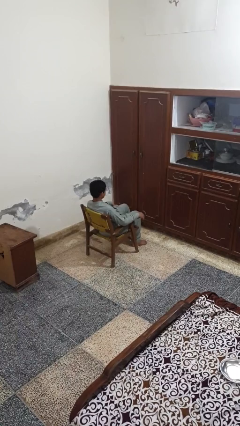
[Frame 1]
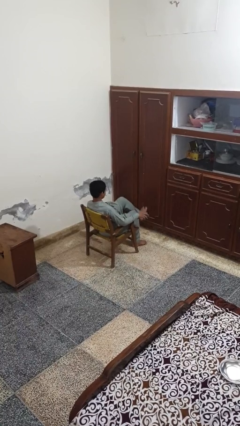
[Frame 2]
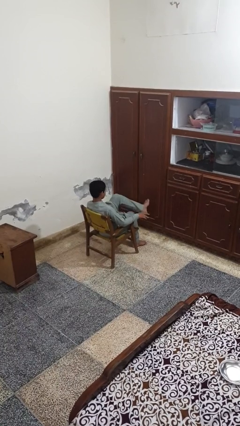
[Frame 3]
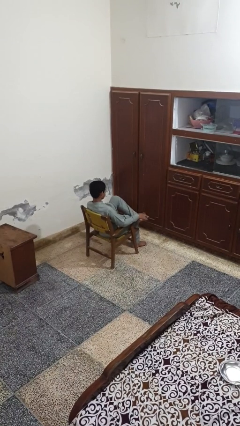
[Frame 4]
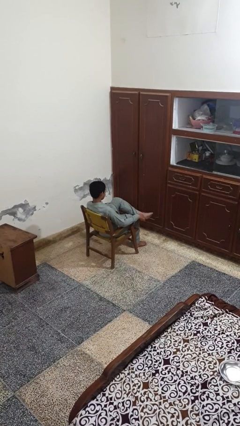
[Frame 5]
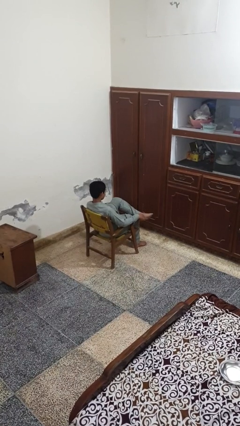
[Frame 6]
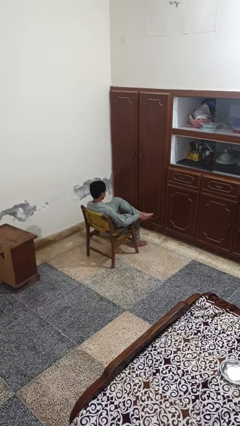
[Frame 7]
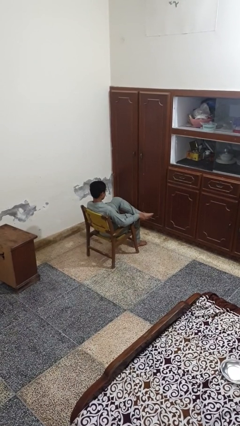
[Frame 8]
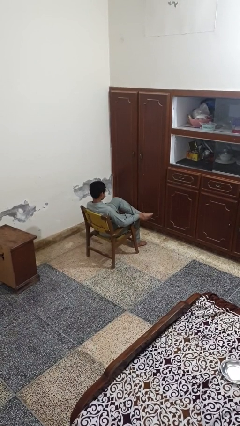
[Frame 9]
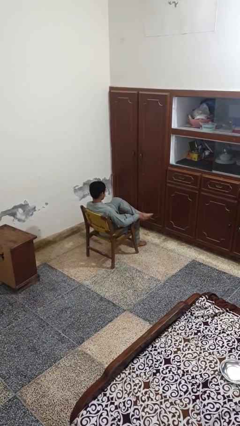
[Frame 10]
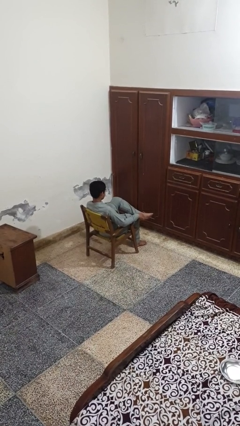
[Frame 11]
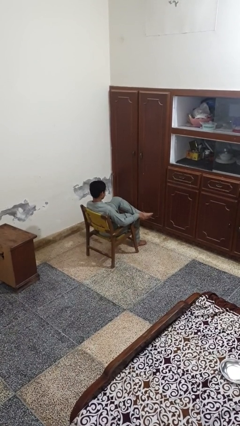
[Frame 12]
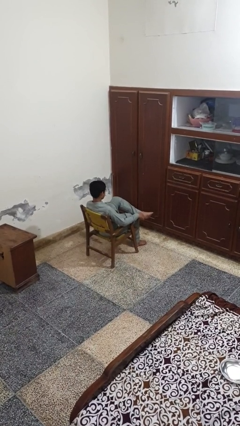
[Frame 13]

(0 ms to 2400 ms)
person crosses legs

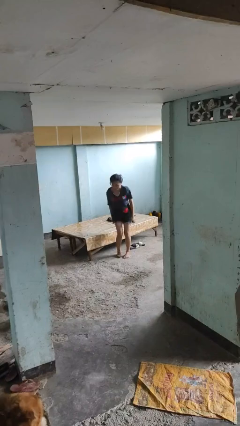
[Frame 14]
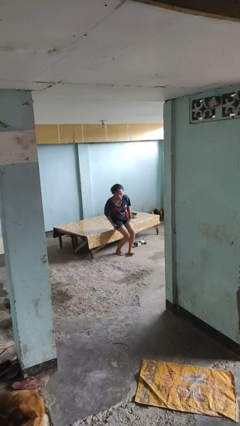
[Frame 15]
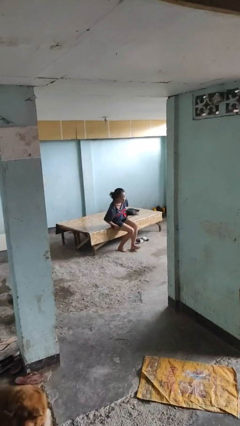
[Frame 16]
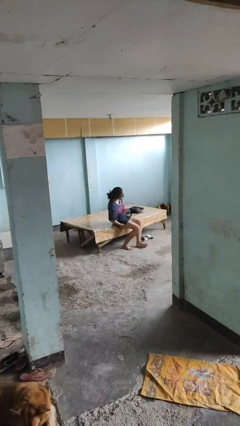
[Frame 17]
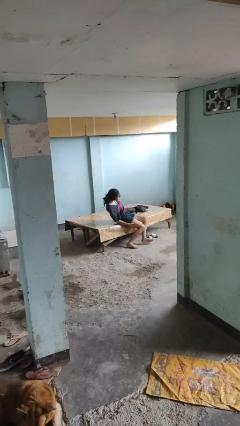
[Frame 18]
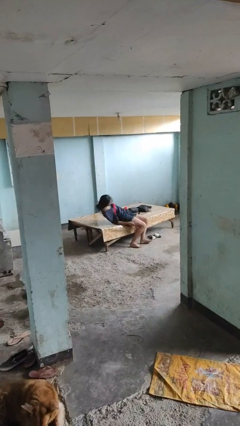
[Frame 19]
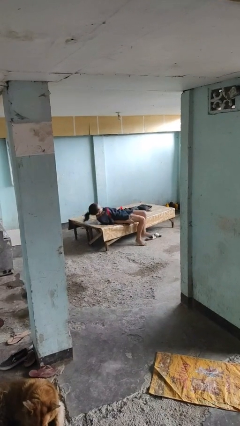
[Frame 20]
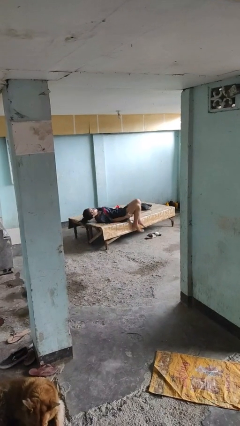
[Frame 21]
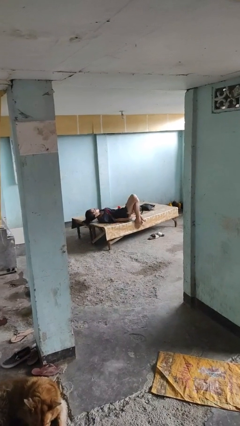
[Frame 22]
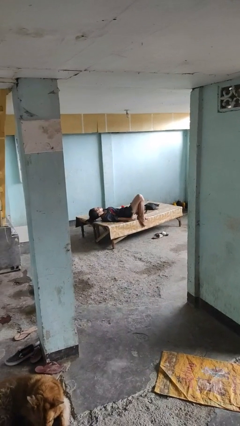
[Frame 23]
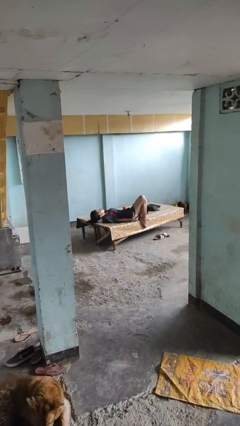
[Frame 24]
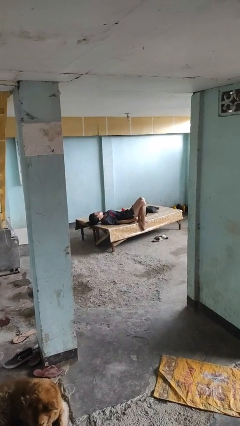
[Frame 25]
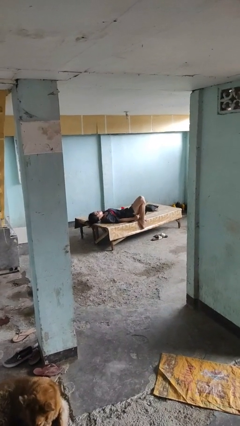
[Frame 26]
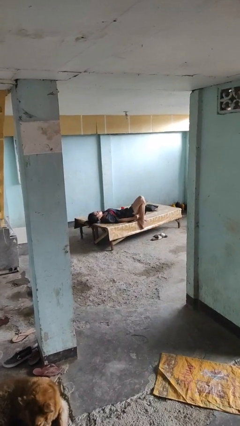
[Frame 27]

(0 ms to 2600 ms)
person lies down on bed

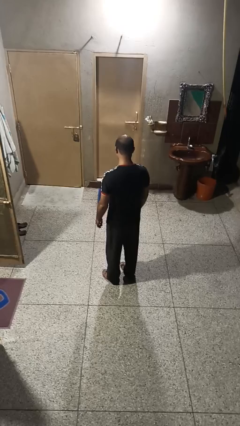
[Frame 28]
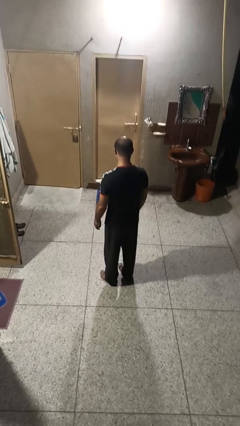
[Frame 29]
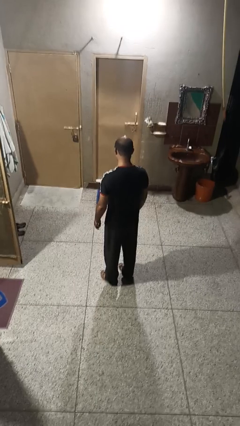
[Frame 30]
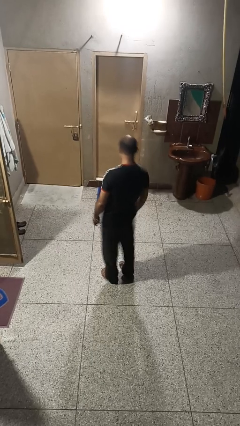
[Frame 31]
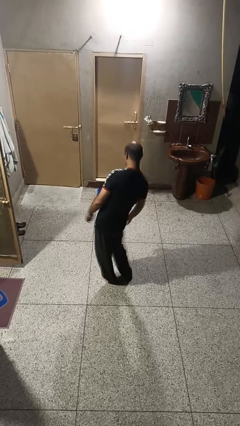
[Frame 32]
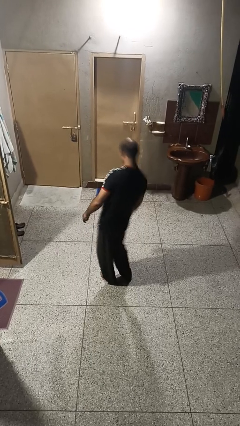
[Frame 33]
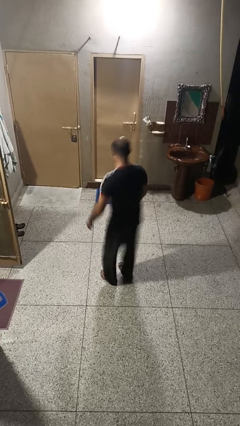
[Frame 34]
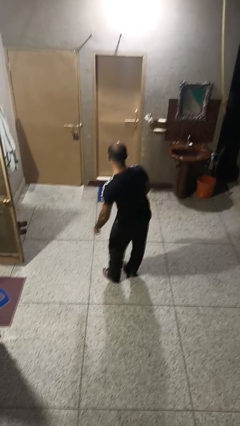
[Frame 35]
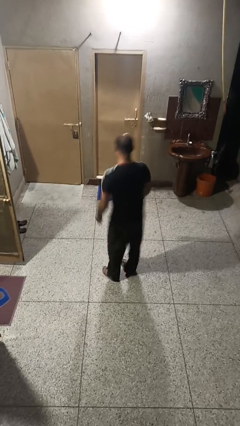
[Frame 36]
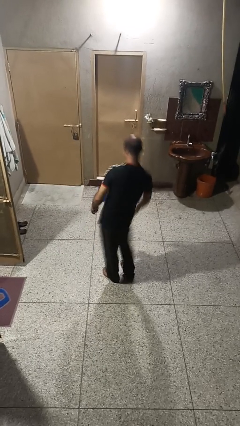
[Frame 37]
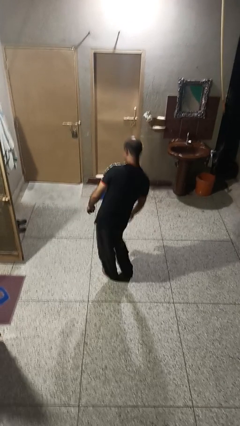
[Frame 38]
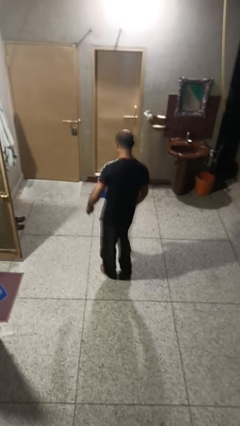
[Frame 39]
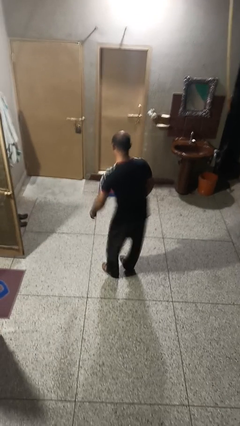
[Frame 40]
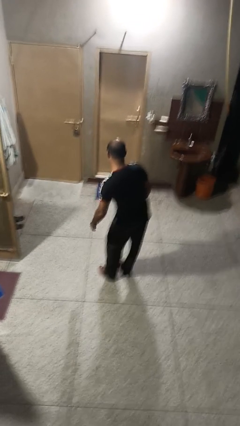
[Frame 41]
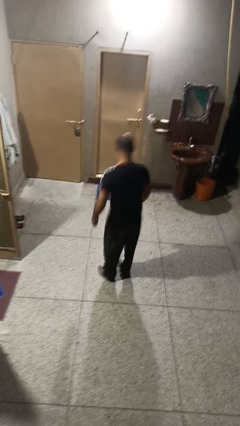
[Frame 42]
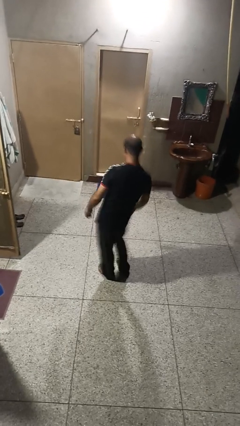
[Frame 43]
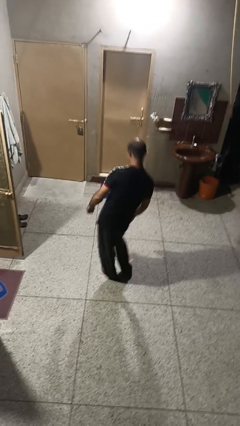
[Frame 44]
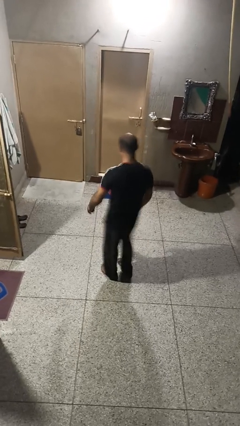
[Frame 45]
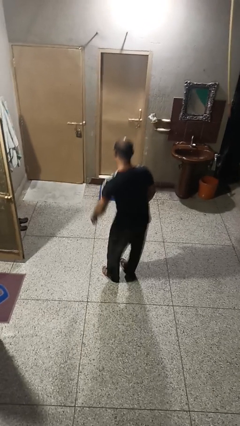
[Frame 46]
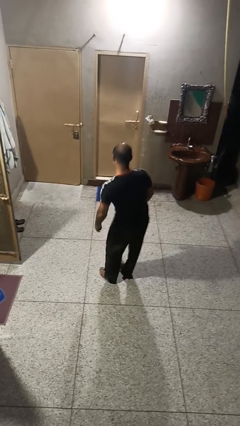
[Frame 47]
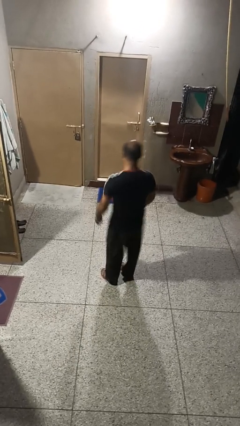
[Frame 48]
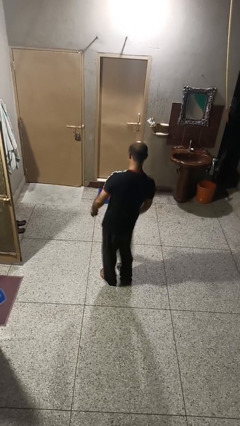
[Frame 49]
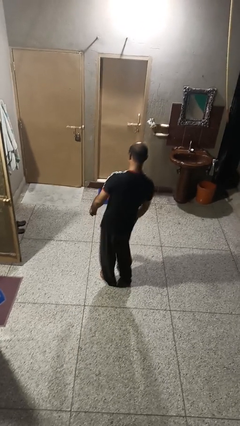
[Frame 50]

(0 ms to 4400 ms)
person wiggles hips

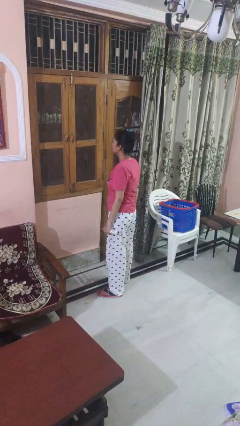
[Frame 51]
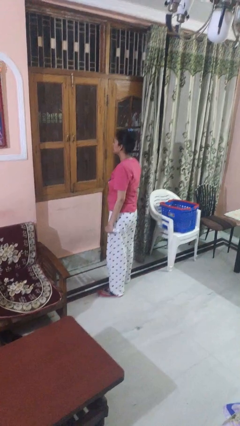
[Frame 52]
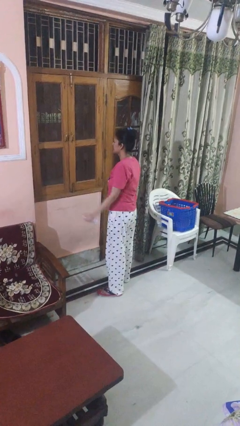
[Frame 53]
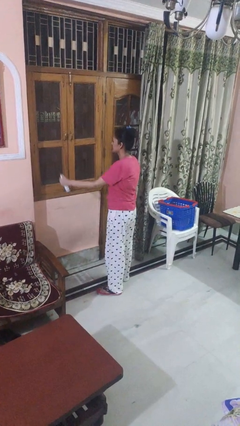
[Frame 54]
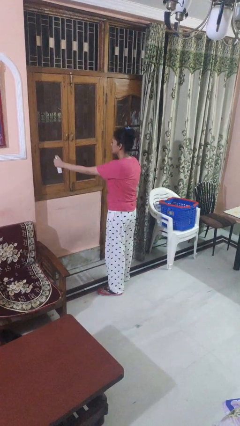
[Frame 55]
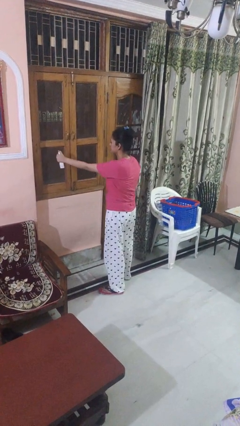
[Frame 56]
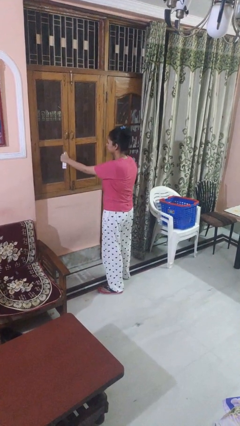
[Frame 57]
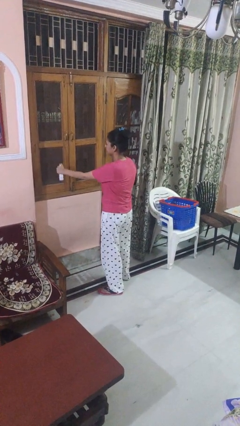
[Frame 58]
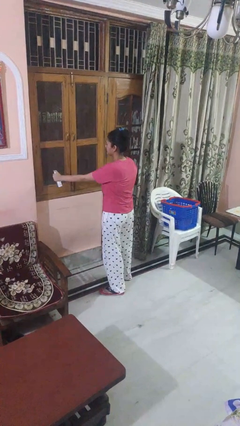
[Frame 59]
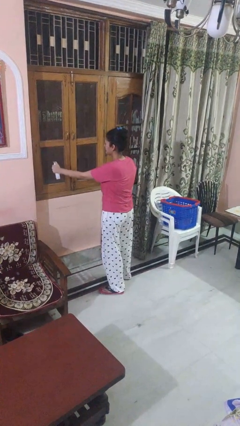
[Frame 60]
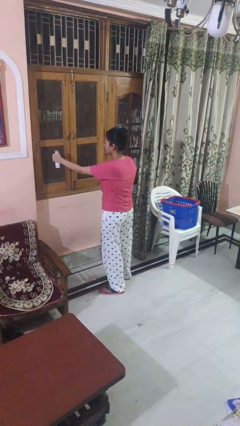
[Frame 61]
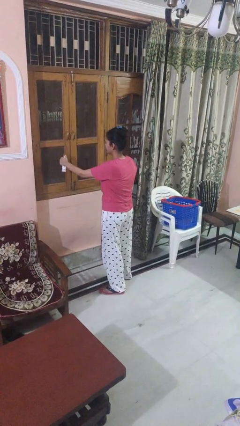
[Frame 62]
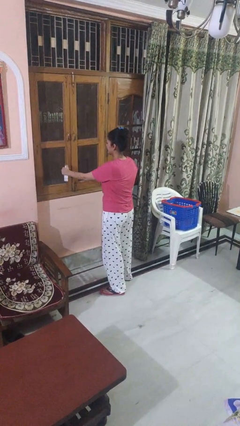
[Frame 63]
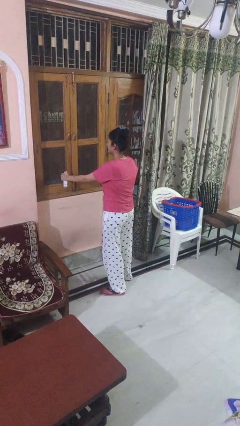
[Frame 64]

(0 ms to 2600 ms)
person sprays from bottle

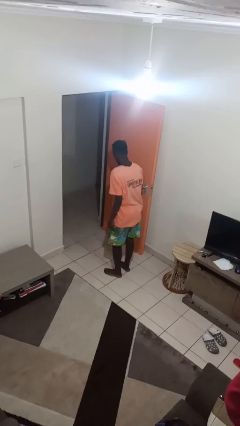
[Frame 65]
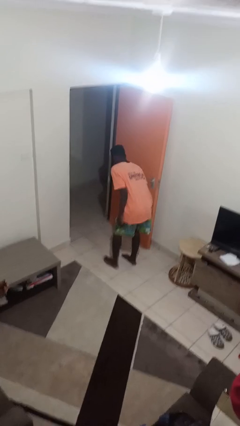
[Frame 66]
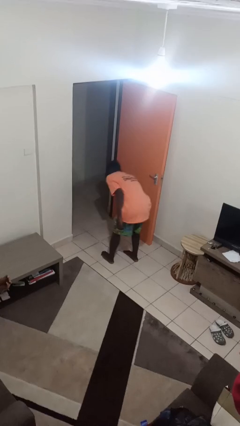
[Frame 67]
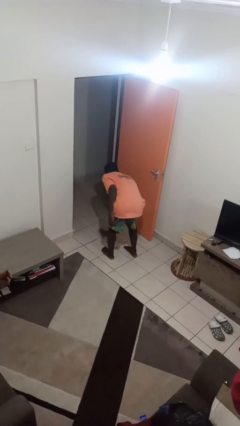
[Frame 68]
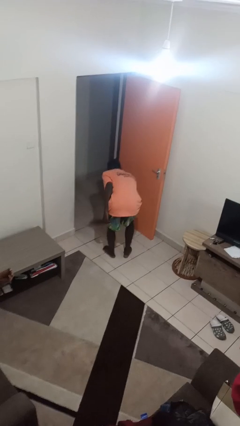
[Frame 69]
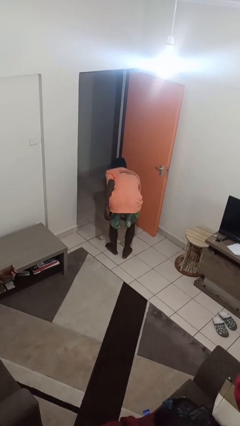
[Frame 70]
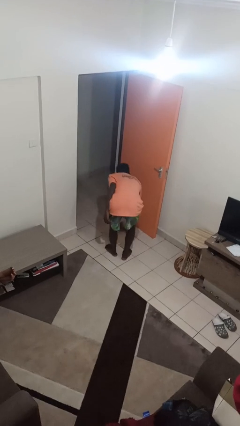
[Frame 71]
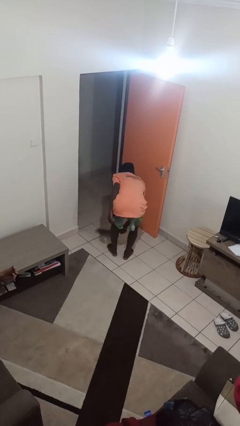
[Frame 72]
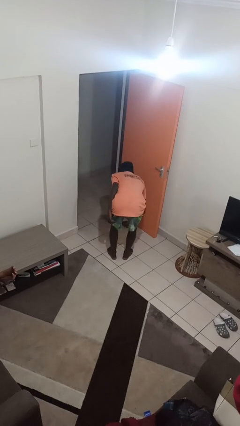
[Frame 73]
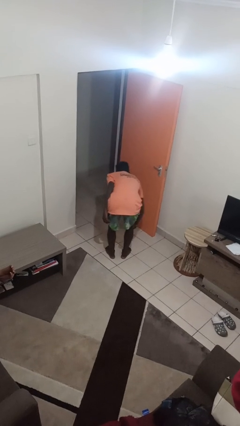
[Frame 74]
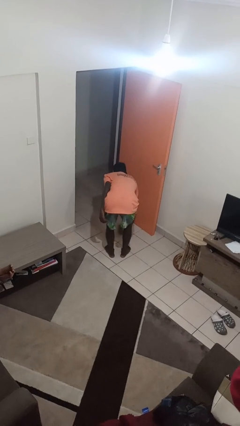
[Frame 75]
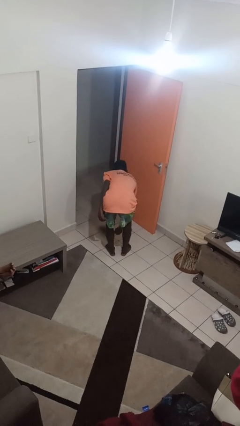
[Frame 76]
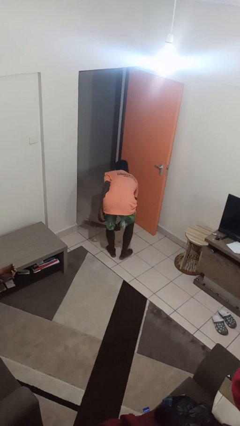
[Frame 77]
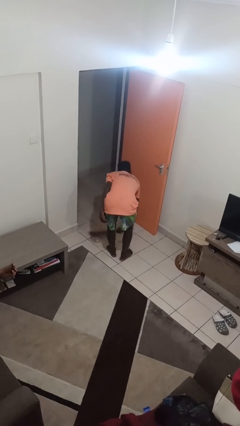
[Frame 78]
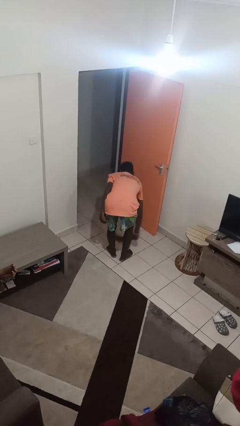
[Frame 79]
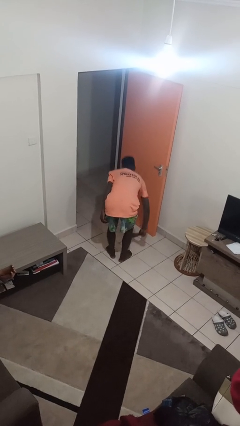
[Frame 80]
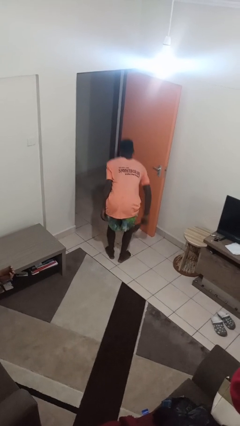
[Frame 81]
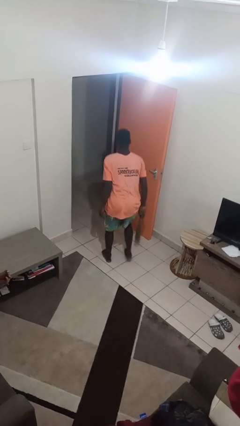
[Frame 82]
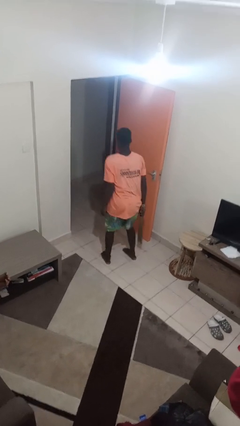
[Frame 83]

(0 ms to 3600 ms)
person sweeps floor

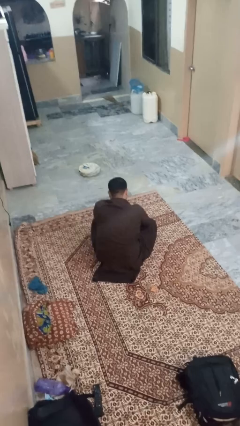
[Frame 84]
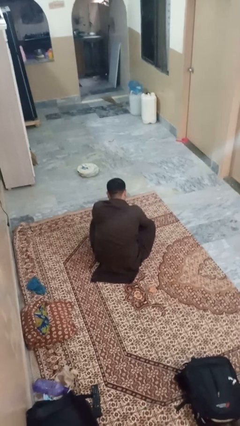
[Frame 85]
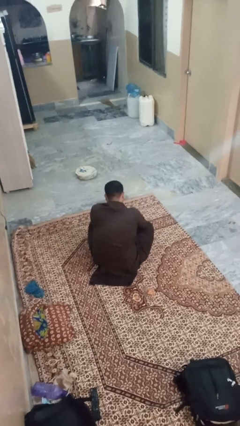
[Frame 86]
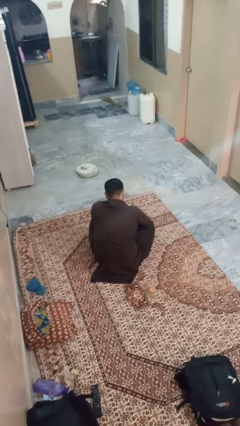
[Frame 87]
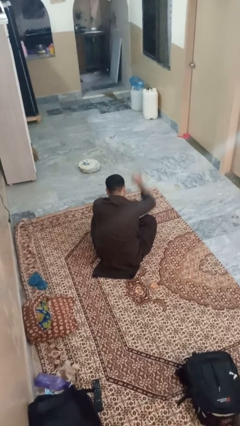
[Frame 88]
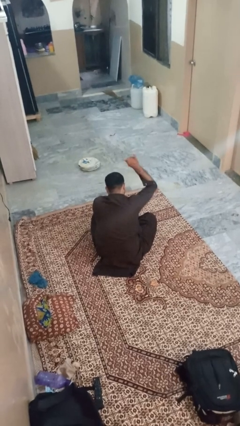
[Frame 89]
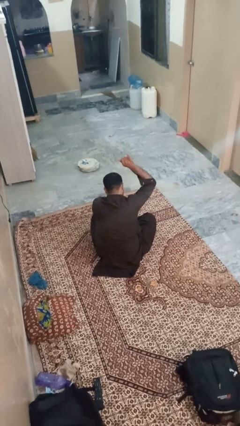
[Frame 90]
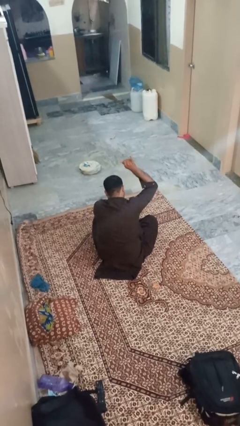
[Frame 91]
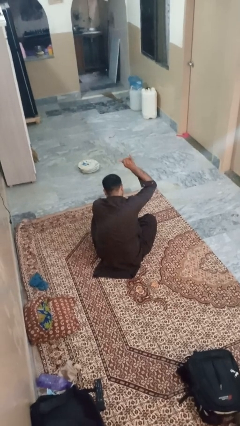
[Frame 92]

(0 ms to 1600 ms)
person gestures hang loose

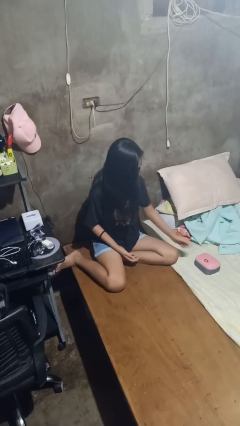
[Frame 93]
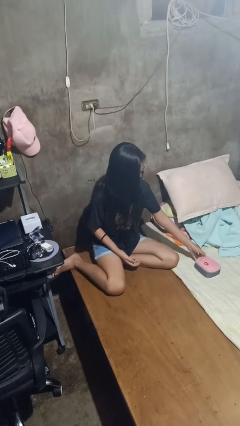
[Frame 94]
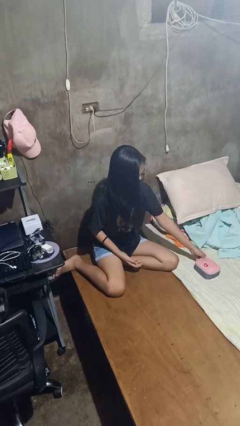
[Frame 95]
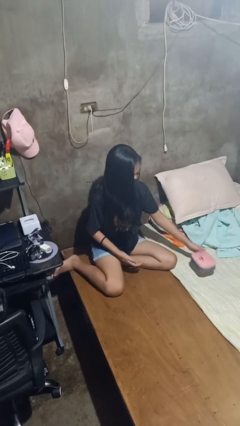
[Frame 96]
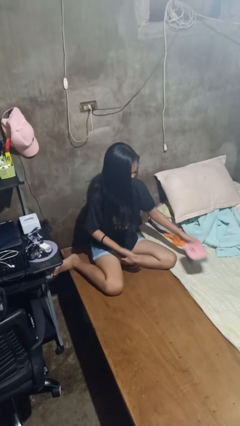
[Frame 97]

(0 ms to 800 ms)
person picks up object from bed
